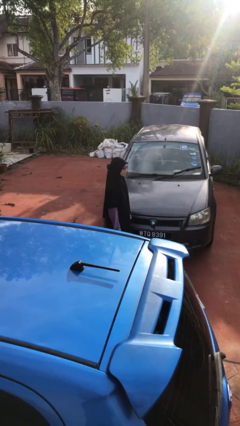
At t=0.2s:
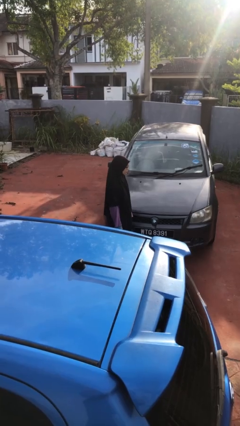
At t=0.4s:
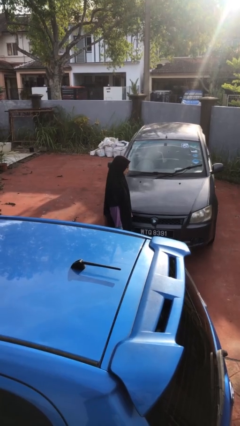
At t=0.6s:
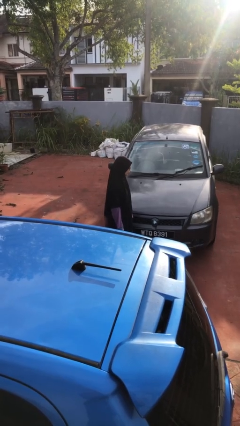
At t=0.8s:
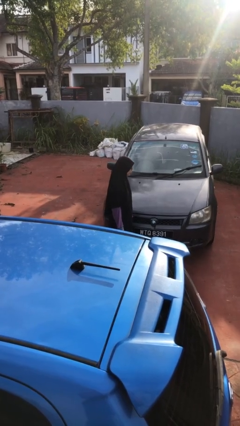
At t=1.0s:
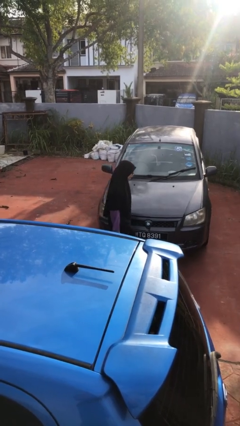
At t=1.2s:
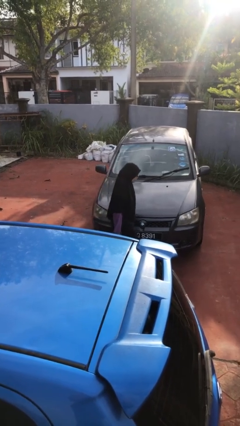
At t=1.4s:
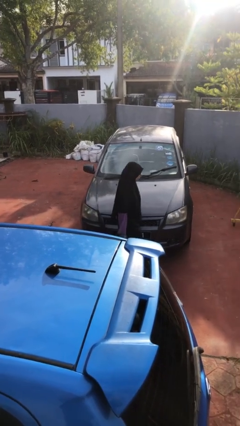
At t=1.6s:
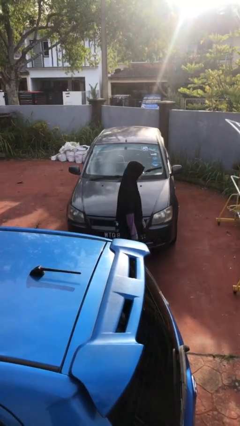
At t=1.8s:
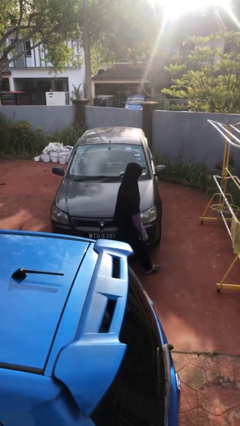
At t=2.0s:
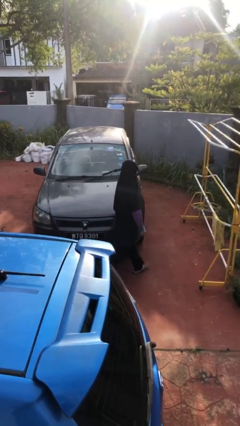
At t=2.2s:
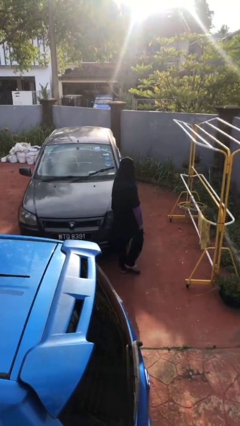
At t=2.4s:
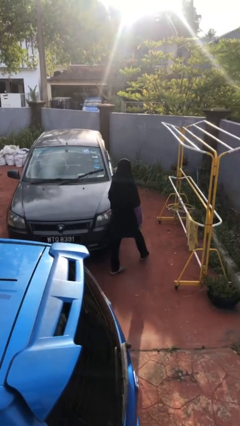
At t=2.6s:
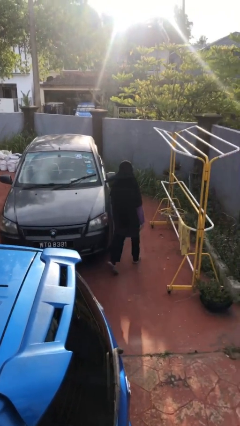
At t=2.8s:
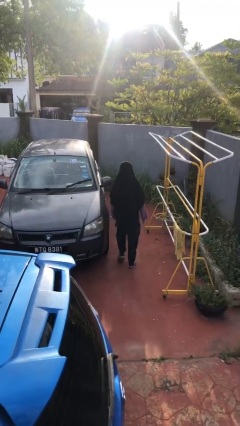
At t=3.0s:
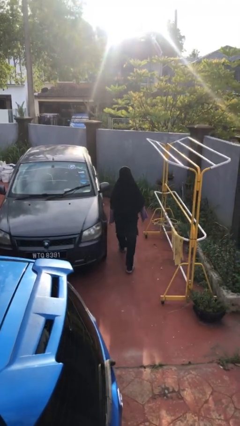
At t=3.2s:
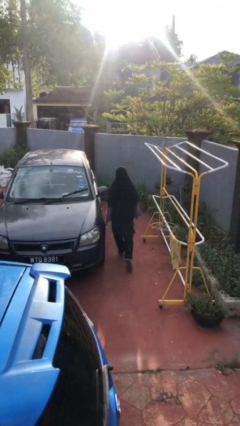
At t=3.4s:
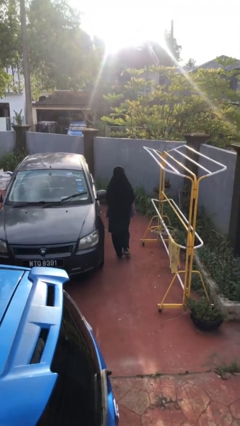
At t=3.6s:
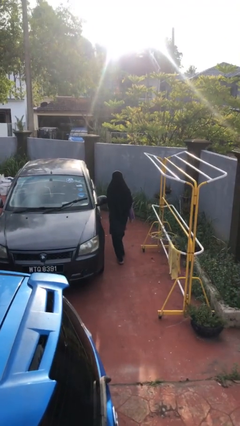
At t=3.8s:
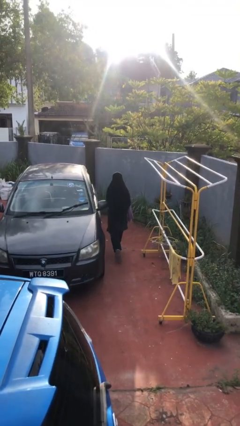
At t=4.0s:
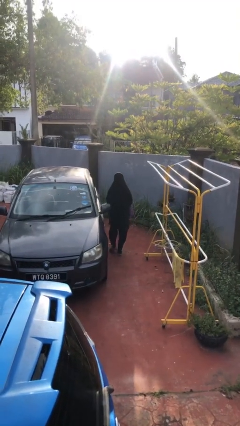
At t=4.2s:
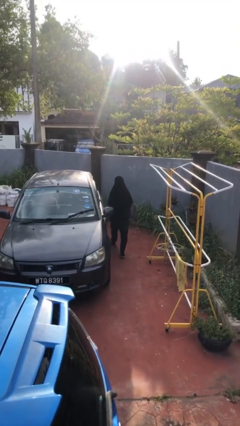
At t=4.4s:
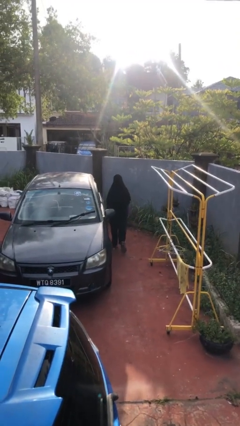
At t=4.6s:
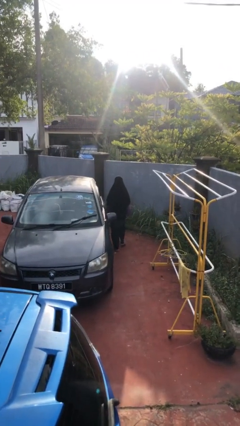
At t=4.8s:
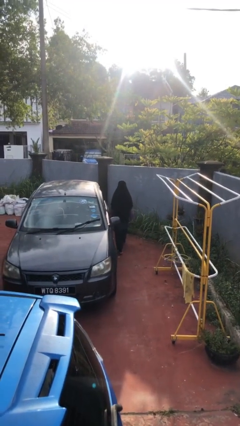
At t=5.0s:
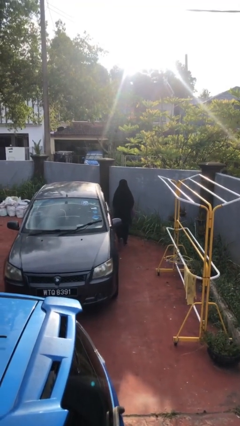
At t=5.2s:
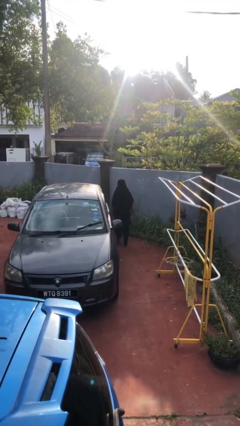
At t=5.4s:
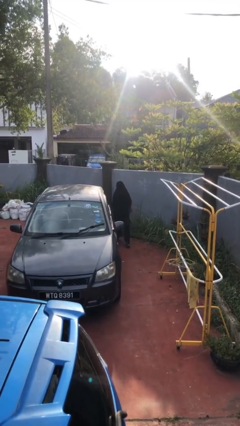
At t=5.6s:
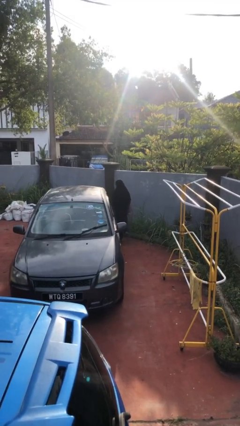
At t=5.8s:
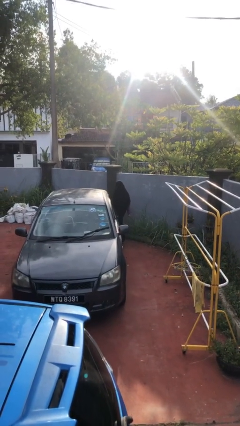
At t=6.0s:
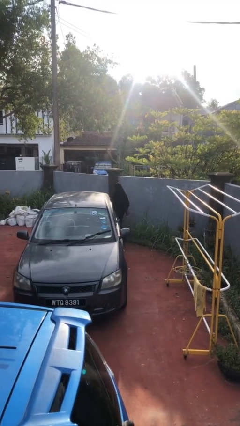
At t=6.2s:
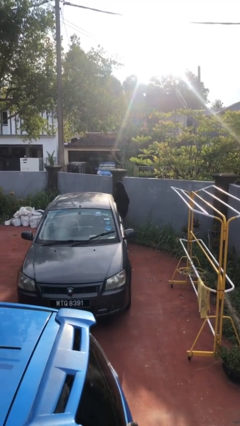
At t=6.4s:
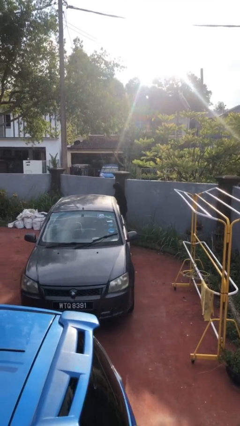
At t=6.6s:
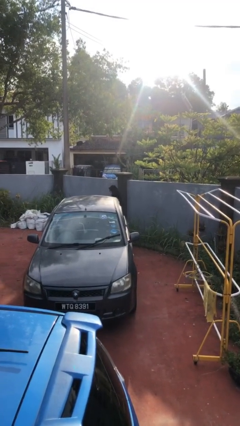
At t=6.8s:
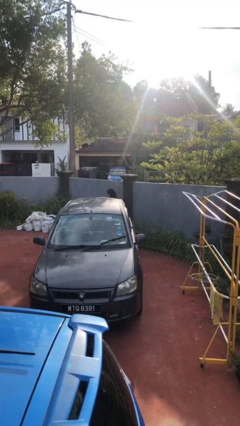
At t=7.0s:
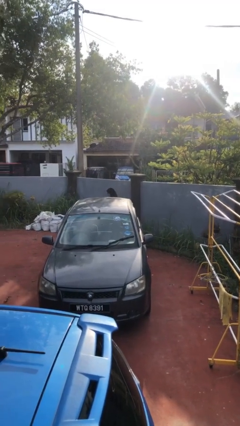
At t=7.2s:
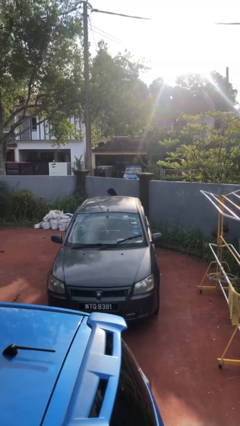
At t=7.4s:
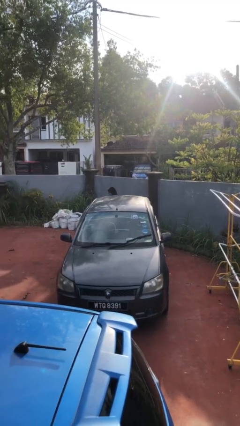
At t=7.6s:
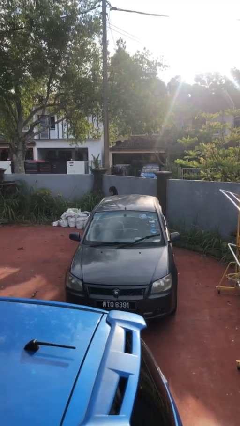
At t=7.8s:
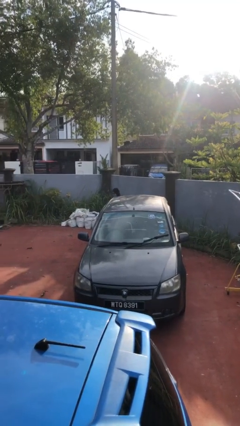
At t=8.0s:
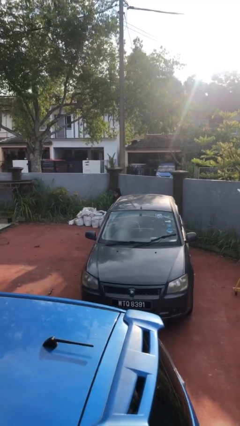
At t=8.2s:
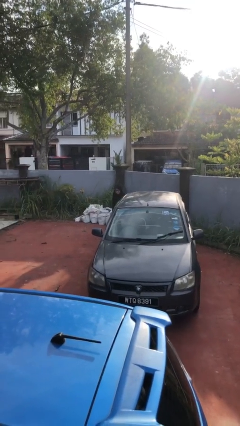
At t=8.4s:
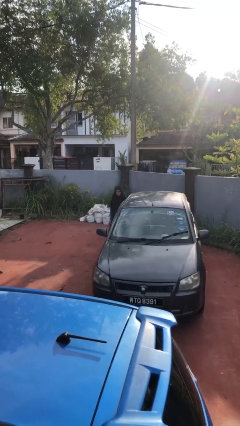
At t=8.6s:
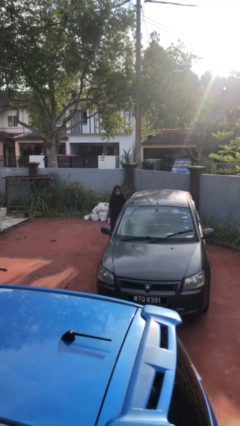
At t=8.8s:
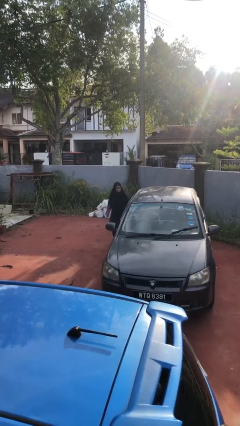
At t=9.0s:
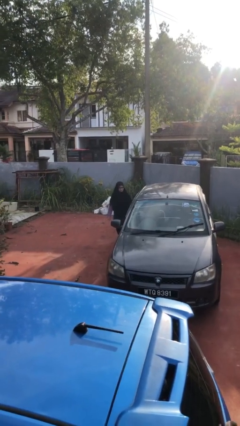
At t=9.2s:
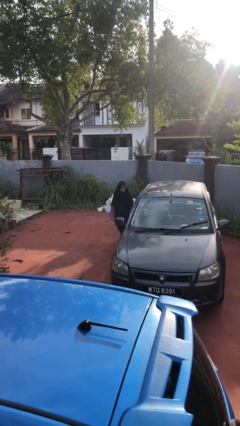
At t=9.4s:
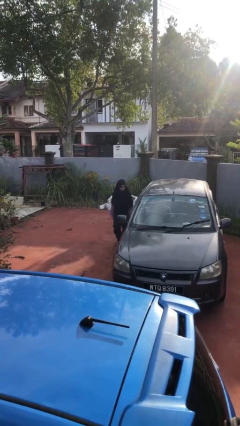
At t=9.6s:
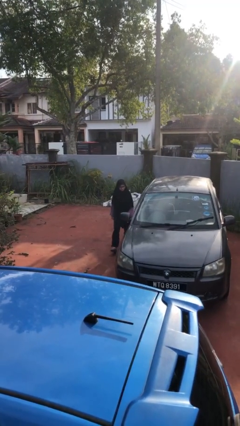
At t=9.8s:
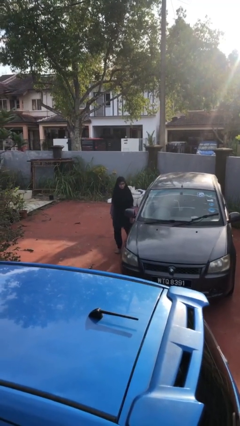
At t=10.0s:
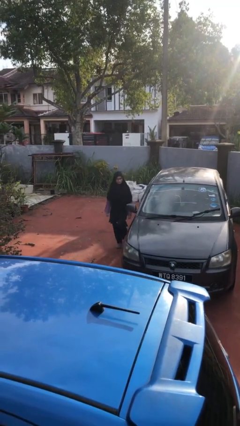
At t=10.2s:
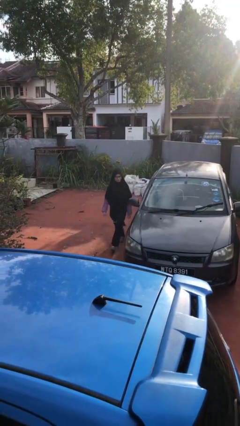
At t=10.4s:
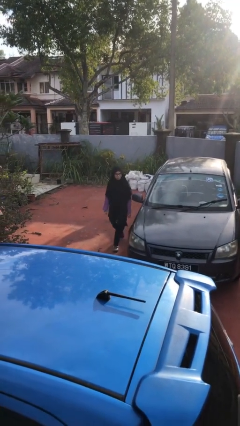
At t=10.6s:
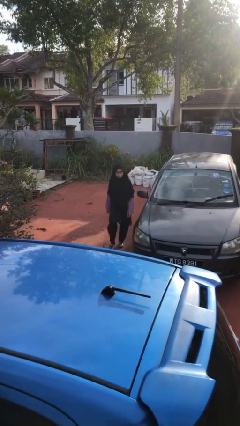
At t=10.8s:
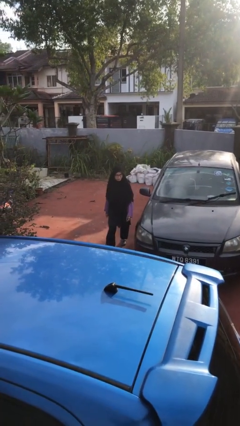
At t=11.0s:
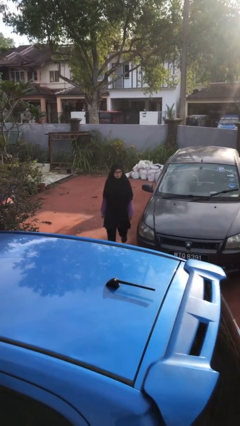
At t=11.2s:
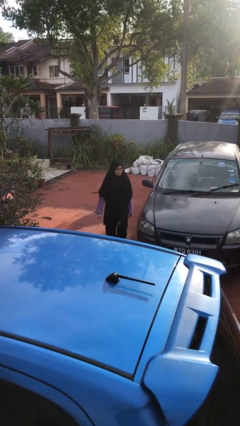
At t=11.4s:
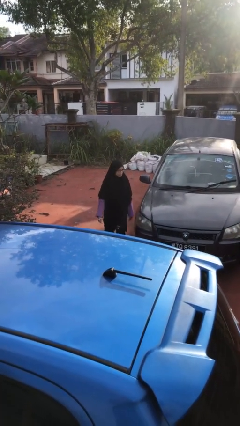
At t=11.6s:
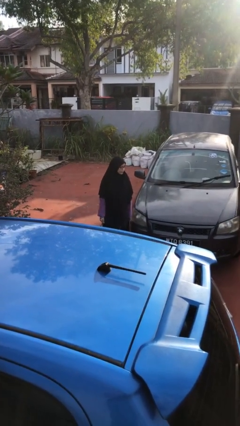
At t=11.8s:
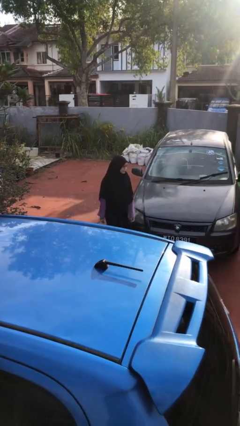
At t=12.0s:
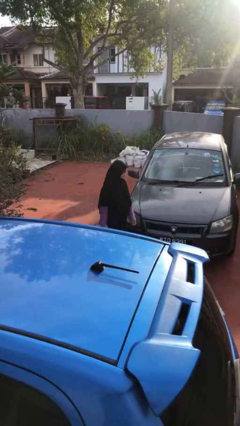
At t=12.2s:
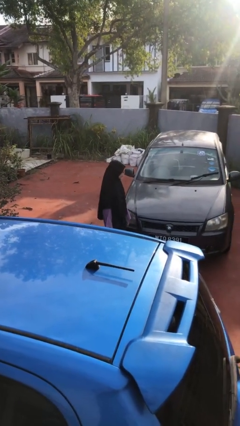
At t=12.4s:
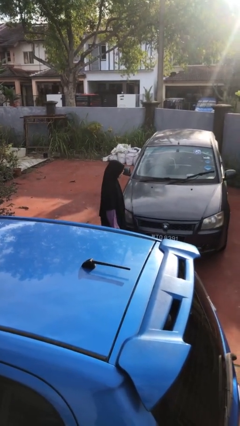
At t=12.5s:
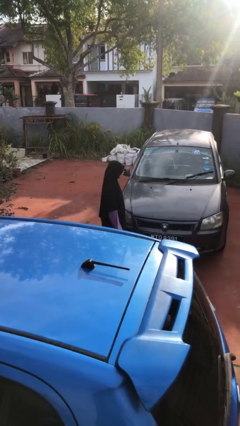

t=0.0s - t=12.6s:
person walks around car

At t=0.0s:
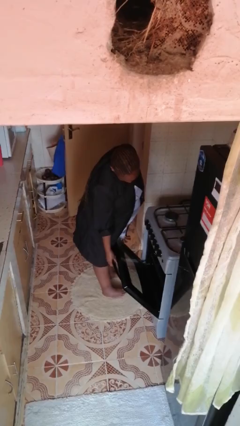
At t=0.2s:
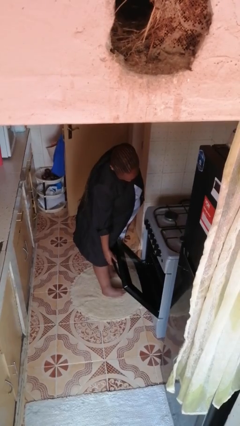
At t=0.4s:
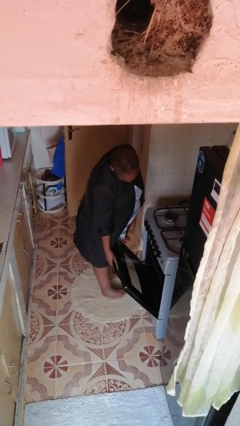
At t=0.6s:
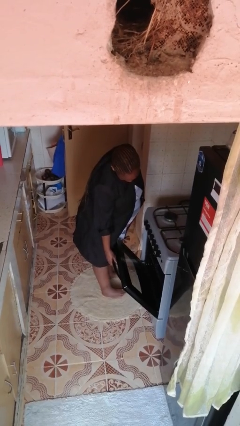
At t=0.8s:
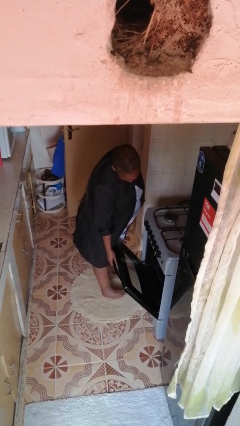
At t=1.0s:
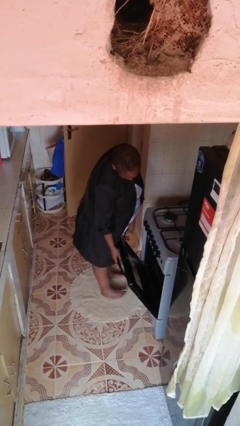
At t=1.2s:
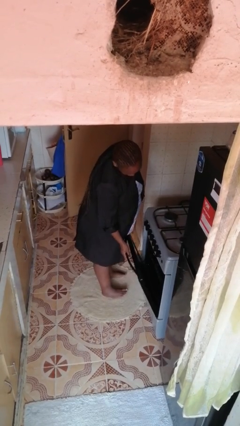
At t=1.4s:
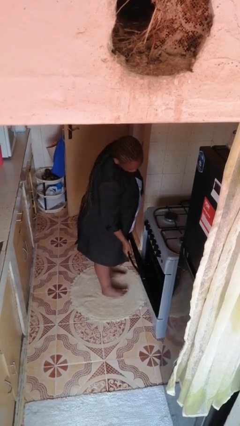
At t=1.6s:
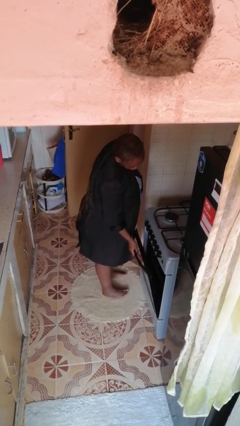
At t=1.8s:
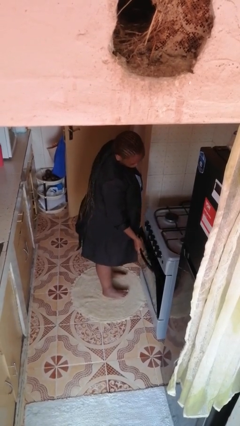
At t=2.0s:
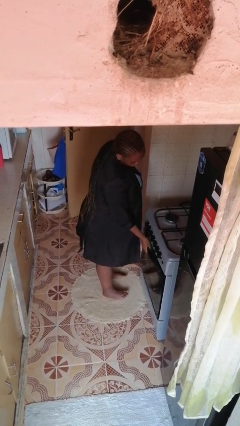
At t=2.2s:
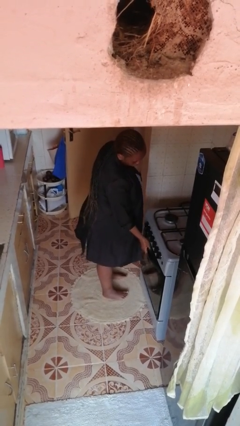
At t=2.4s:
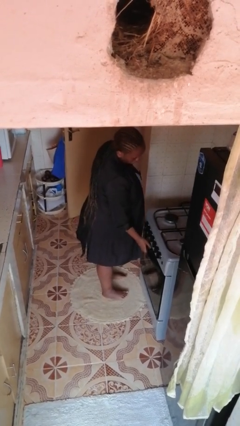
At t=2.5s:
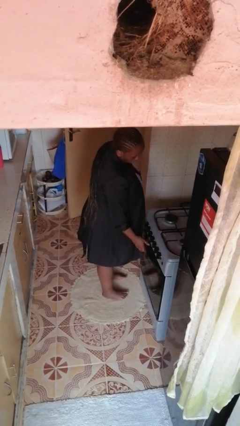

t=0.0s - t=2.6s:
person closes oven door

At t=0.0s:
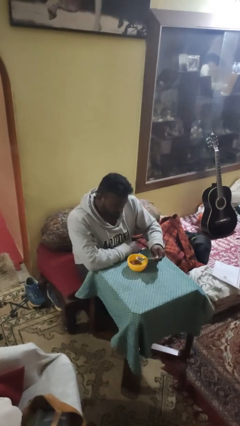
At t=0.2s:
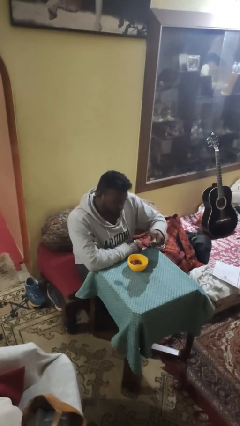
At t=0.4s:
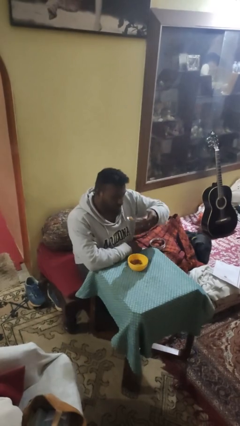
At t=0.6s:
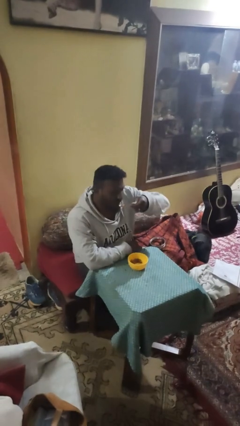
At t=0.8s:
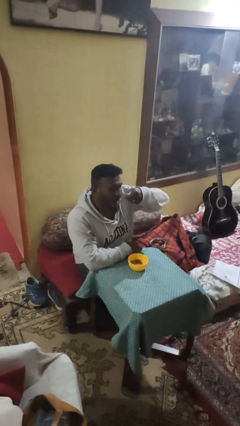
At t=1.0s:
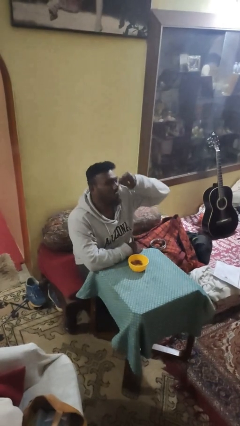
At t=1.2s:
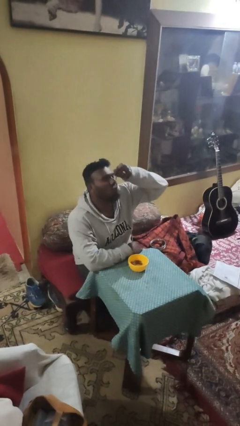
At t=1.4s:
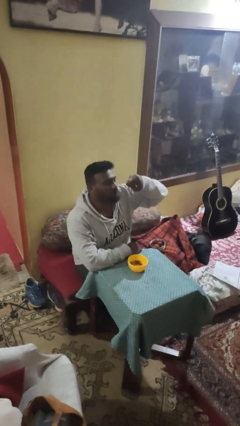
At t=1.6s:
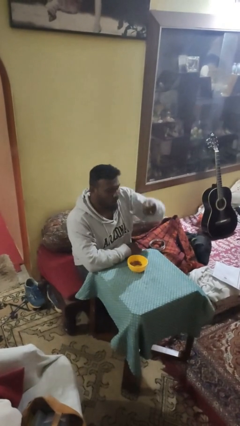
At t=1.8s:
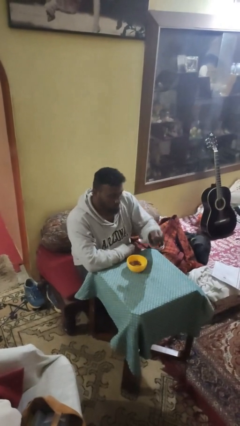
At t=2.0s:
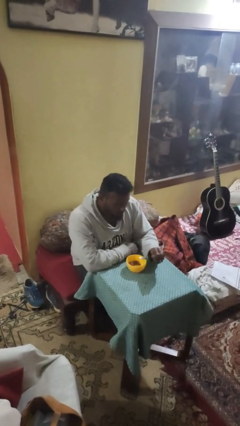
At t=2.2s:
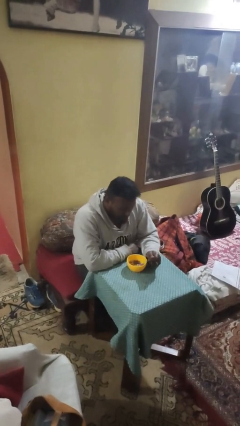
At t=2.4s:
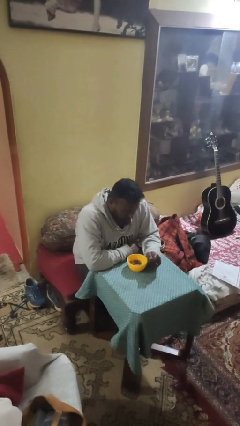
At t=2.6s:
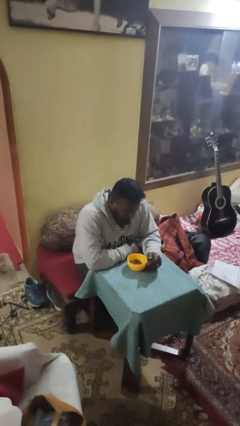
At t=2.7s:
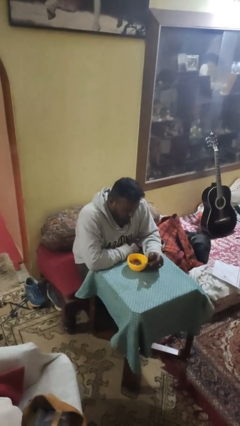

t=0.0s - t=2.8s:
person eats with utensil
